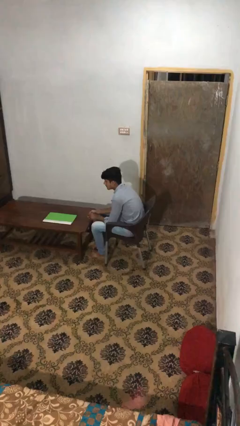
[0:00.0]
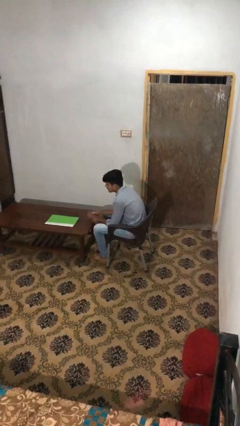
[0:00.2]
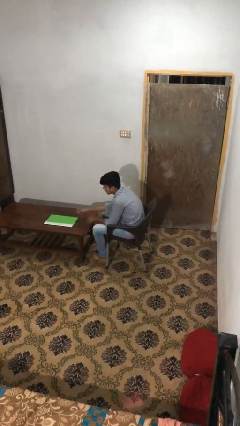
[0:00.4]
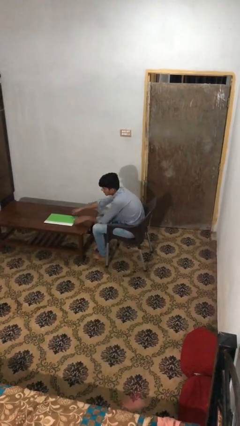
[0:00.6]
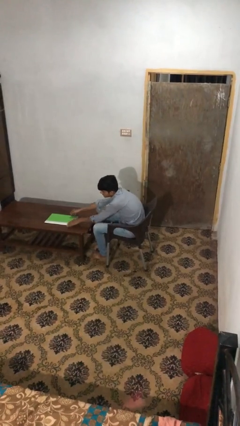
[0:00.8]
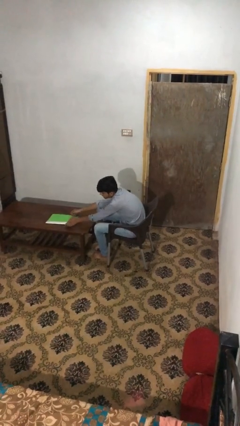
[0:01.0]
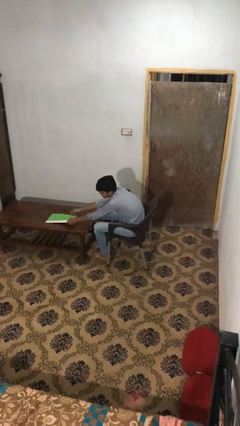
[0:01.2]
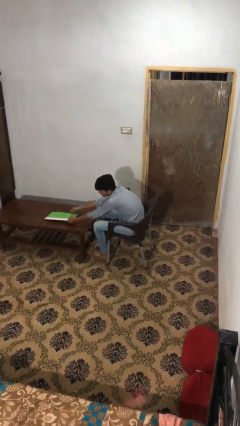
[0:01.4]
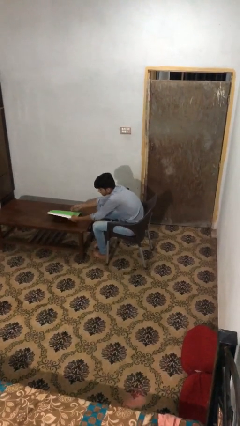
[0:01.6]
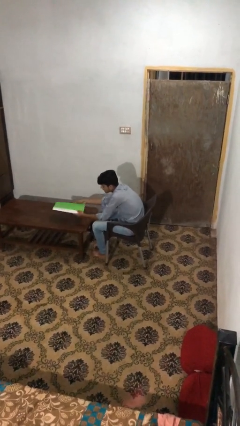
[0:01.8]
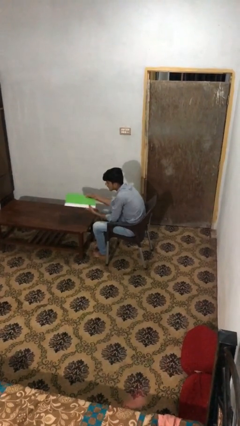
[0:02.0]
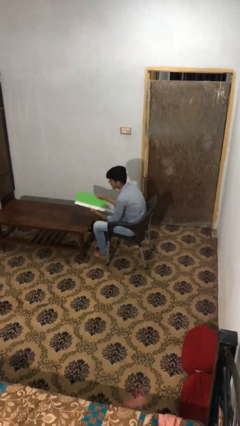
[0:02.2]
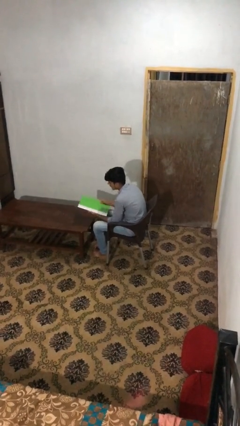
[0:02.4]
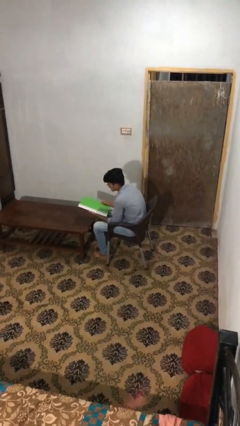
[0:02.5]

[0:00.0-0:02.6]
person picks up object from table

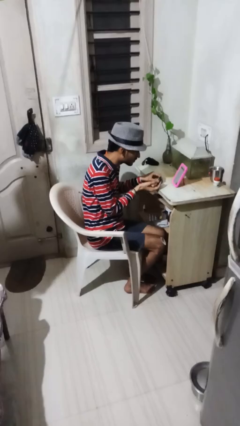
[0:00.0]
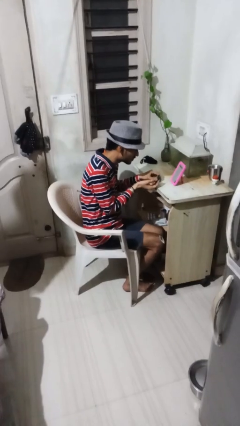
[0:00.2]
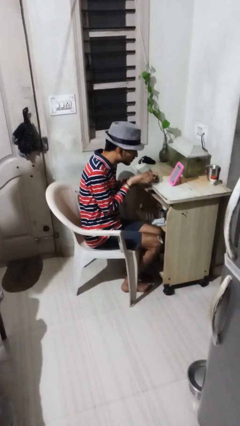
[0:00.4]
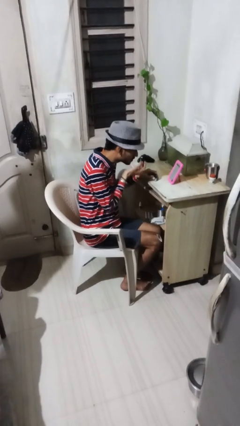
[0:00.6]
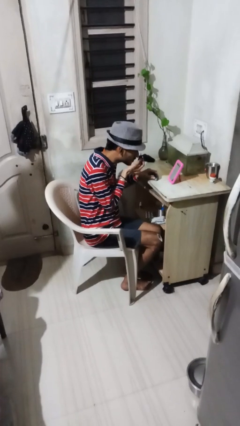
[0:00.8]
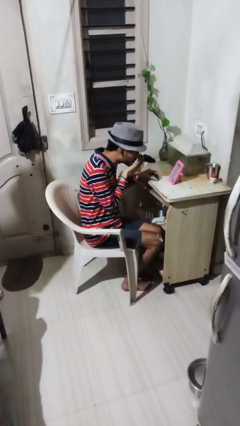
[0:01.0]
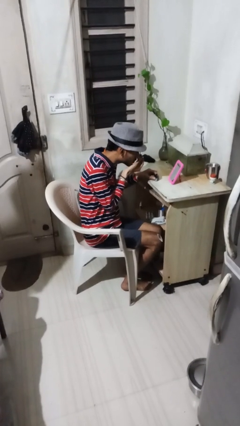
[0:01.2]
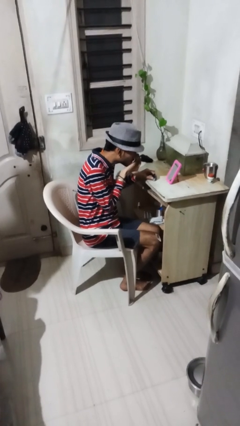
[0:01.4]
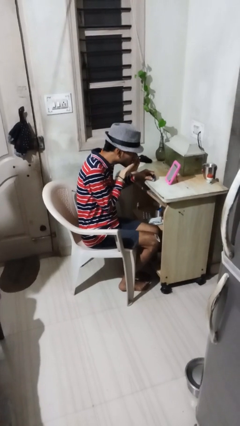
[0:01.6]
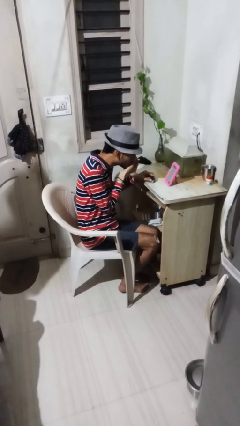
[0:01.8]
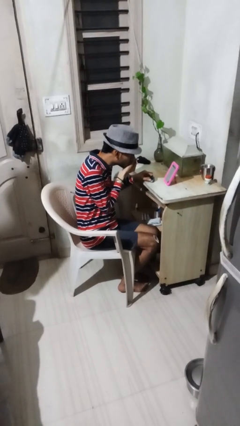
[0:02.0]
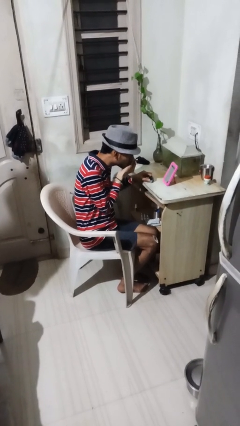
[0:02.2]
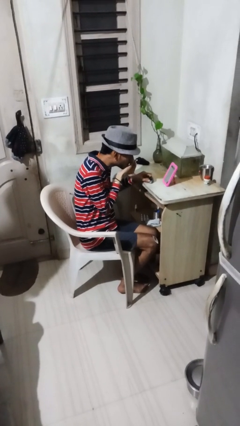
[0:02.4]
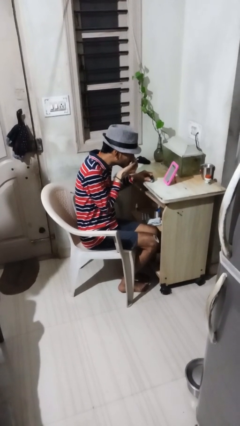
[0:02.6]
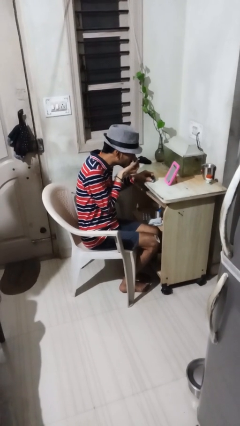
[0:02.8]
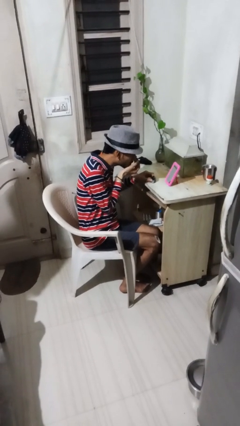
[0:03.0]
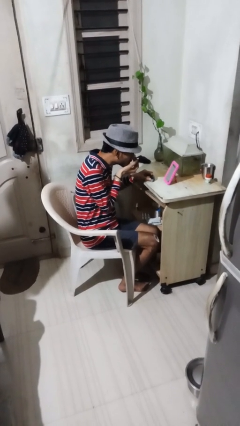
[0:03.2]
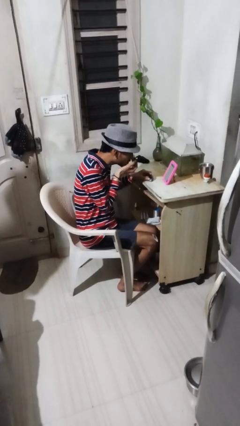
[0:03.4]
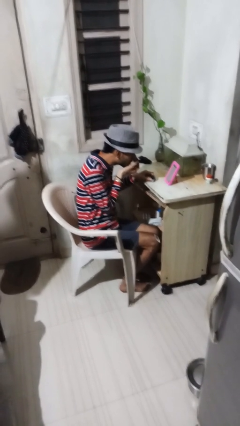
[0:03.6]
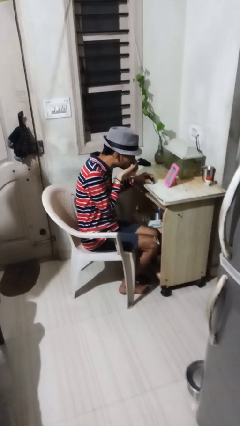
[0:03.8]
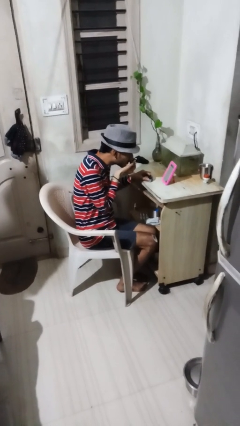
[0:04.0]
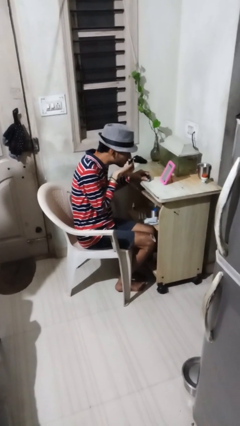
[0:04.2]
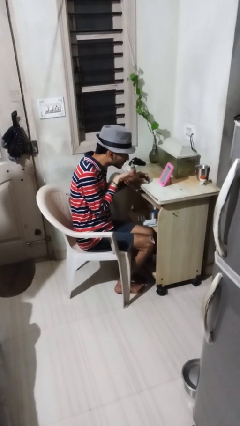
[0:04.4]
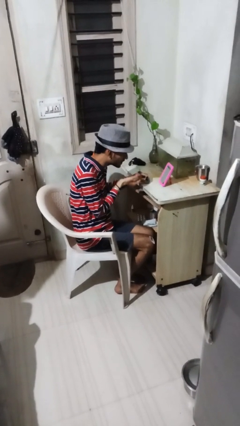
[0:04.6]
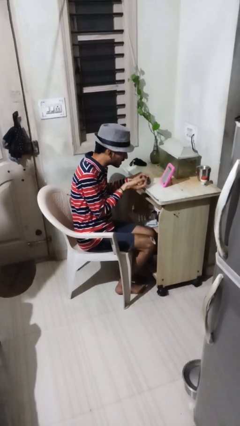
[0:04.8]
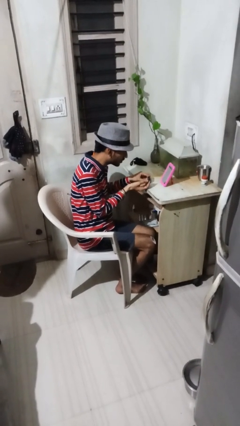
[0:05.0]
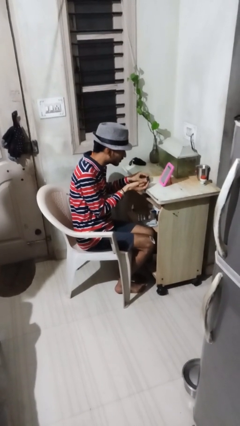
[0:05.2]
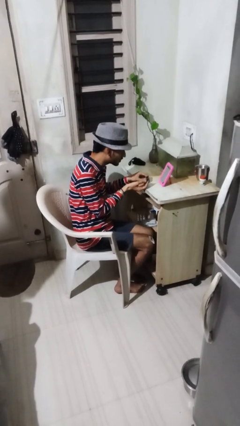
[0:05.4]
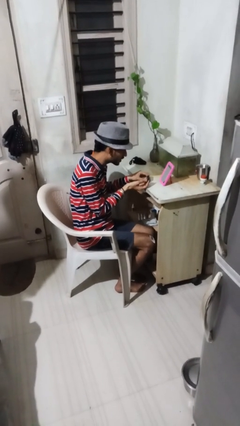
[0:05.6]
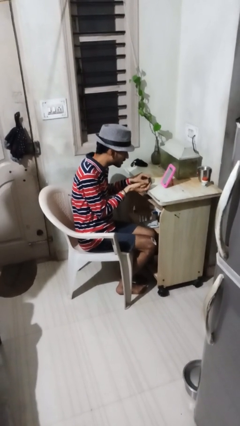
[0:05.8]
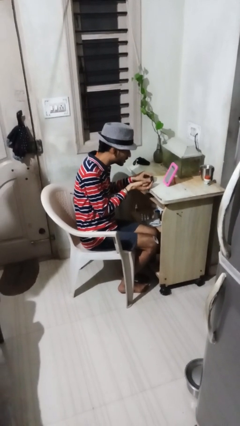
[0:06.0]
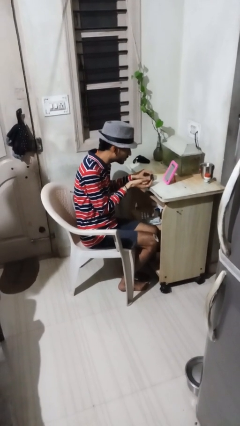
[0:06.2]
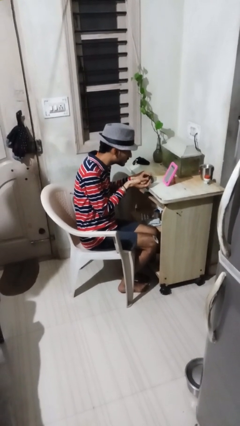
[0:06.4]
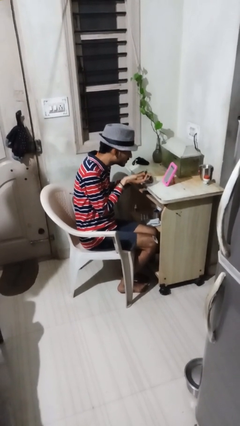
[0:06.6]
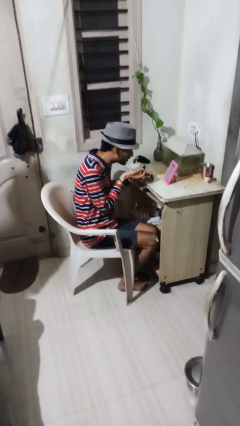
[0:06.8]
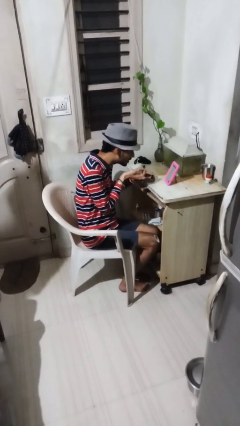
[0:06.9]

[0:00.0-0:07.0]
person applies eye makeup

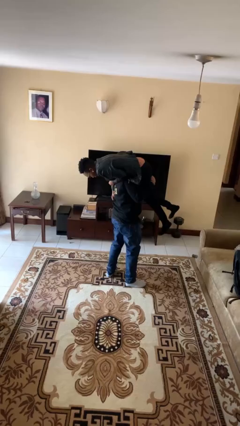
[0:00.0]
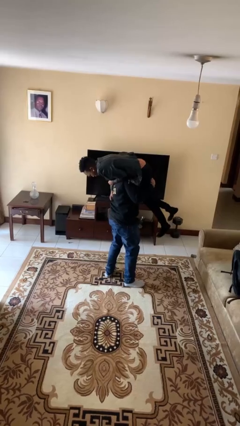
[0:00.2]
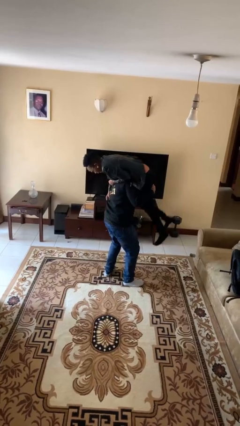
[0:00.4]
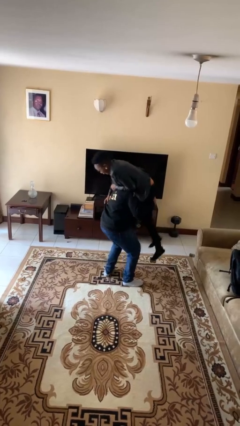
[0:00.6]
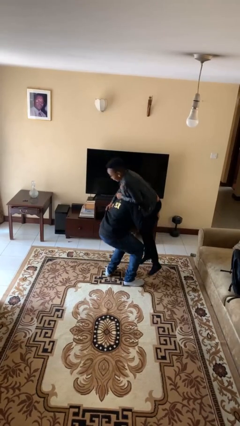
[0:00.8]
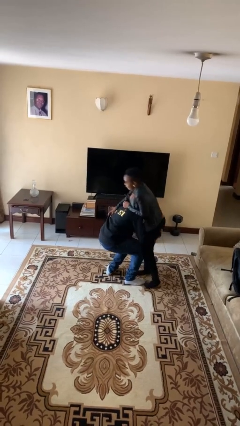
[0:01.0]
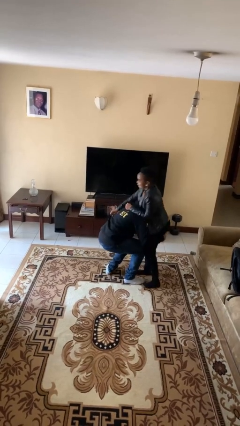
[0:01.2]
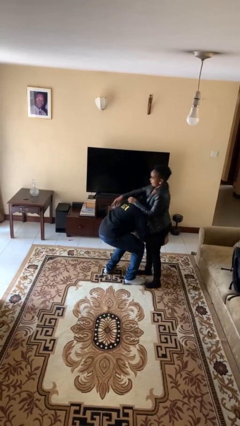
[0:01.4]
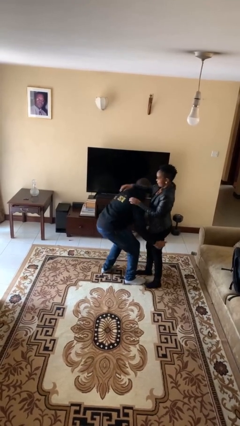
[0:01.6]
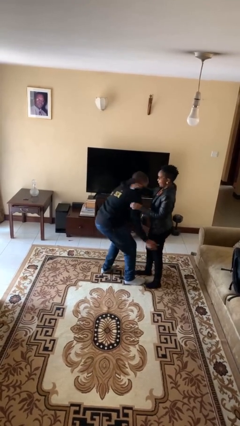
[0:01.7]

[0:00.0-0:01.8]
person puts down person

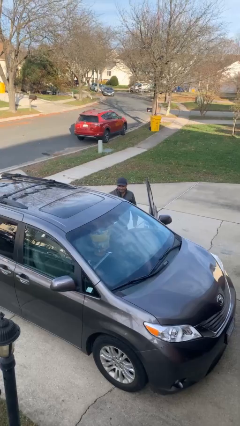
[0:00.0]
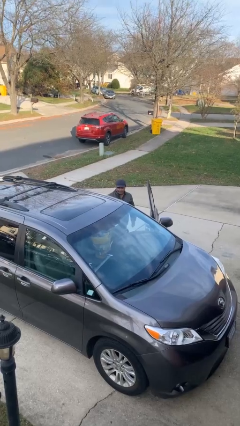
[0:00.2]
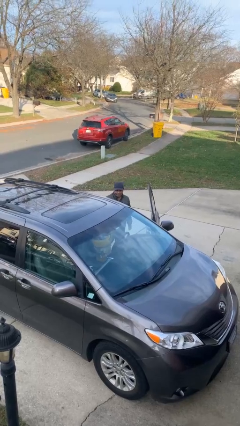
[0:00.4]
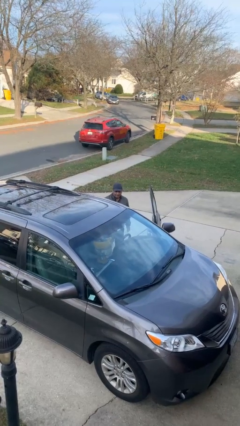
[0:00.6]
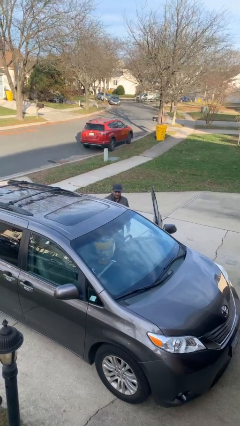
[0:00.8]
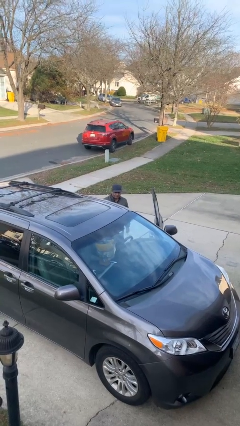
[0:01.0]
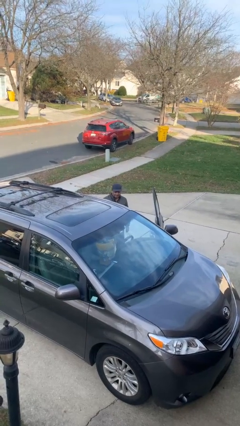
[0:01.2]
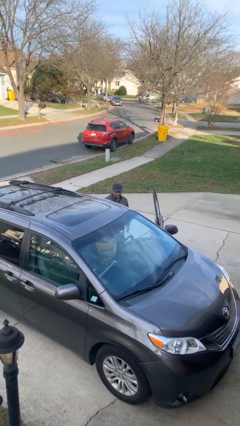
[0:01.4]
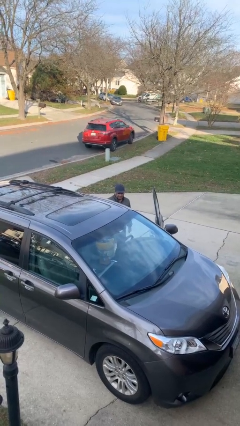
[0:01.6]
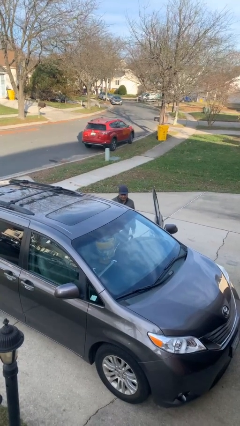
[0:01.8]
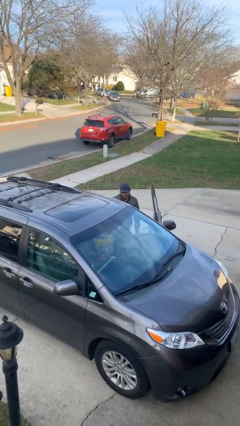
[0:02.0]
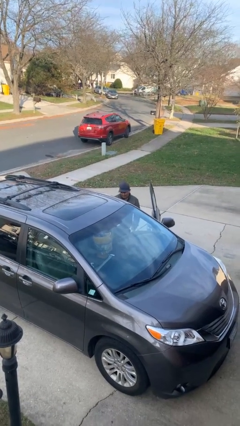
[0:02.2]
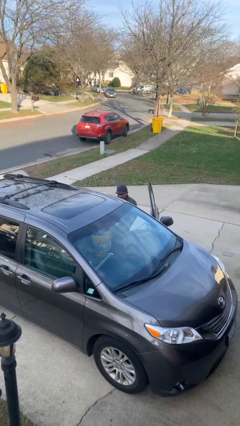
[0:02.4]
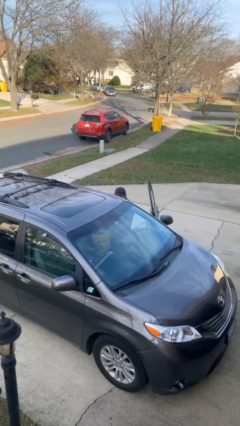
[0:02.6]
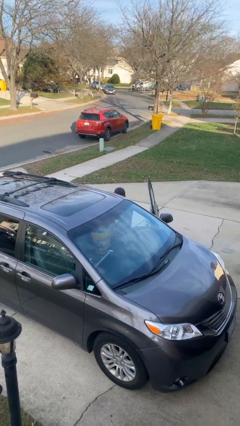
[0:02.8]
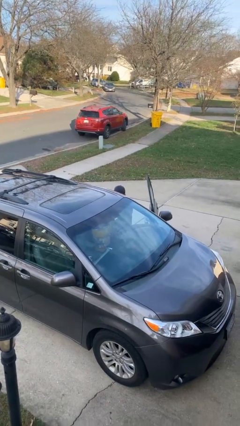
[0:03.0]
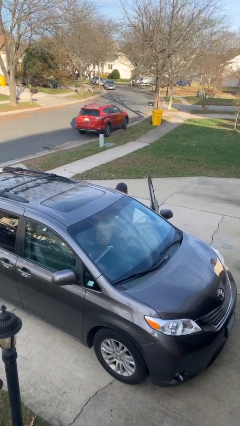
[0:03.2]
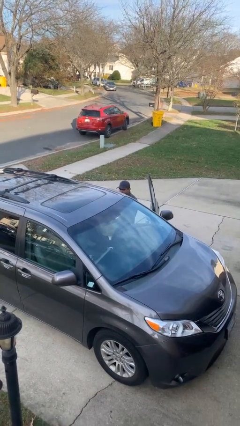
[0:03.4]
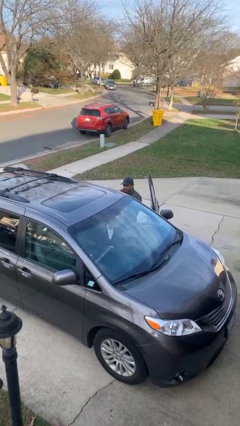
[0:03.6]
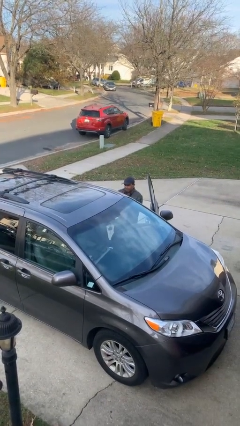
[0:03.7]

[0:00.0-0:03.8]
person unloads car

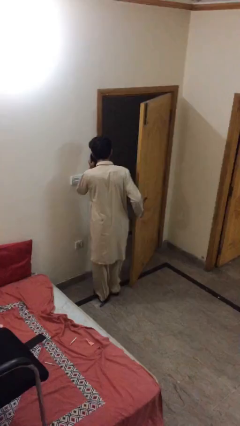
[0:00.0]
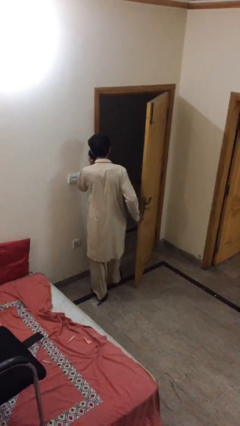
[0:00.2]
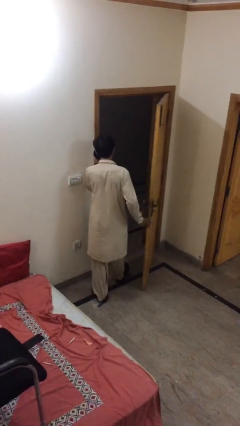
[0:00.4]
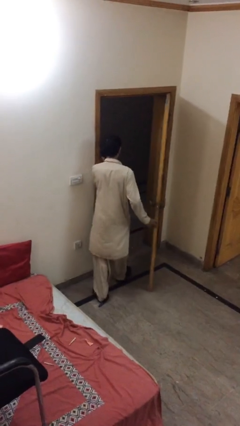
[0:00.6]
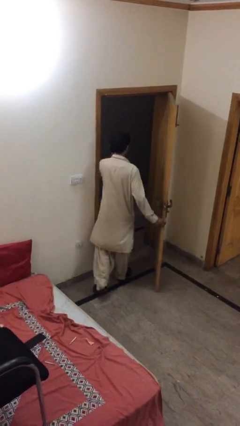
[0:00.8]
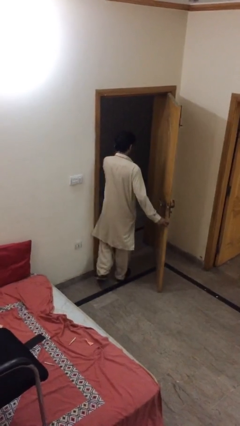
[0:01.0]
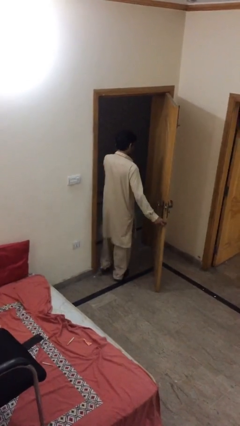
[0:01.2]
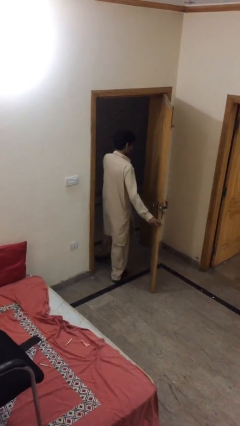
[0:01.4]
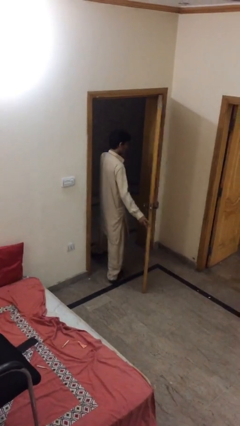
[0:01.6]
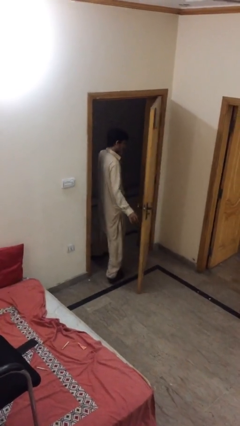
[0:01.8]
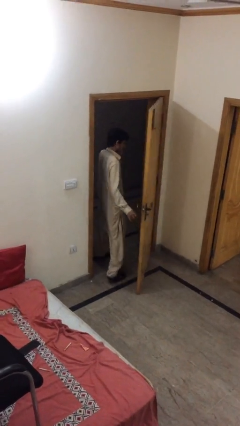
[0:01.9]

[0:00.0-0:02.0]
person exits scene through structure

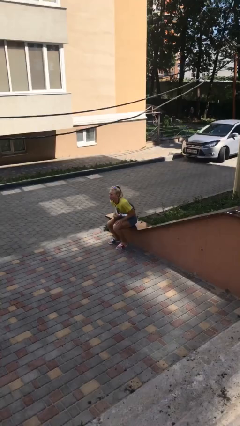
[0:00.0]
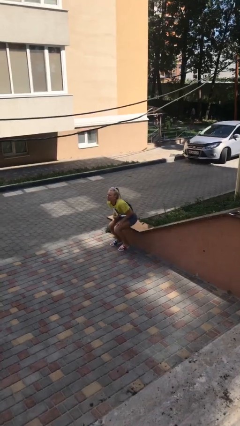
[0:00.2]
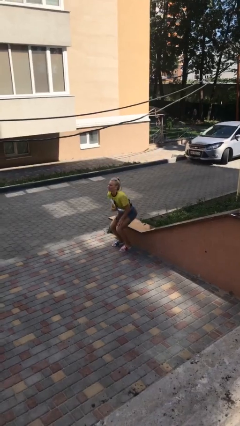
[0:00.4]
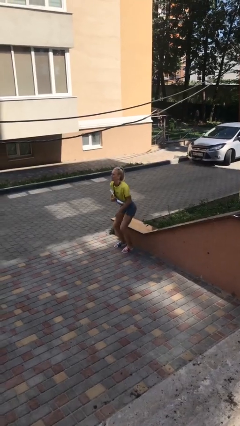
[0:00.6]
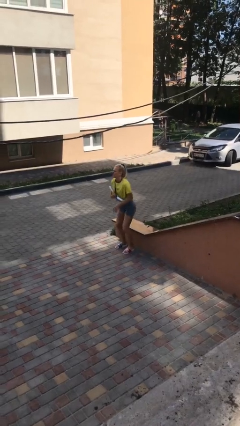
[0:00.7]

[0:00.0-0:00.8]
person stands up
